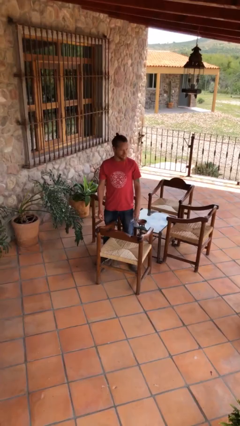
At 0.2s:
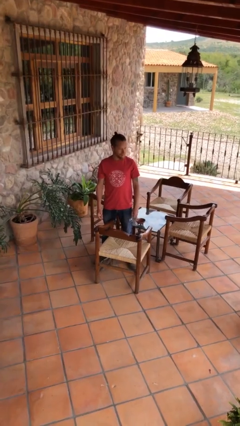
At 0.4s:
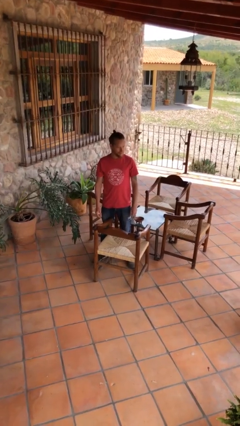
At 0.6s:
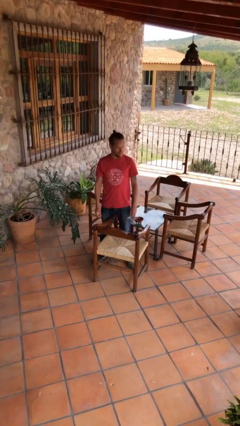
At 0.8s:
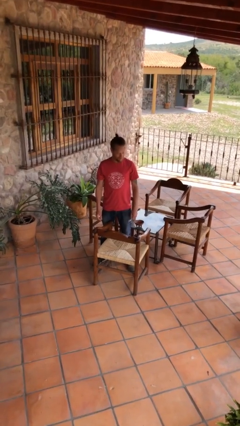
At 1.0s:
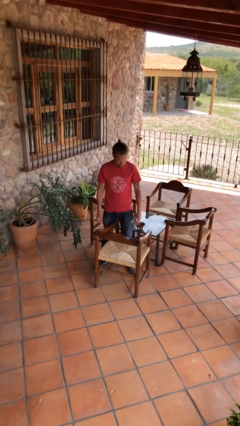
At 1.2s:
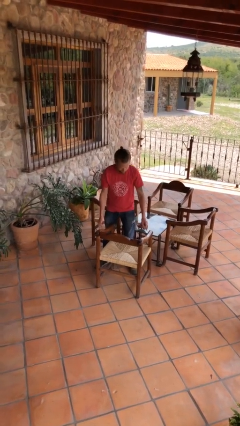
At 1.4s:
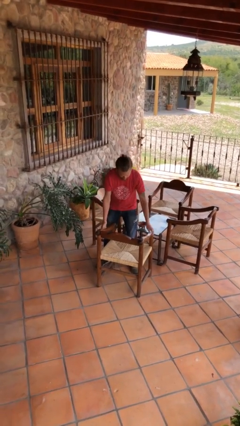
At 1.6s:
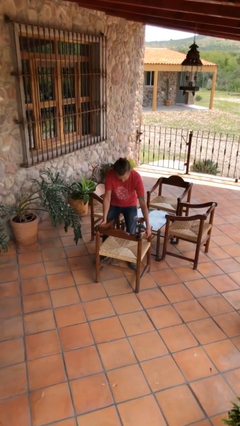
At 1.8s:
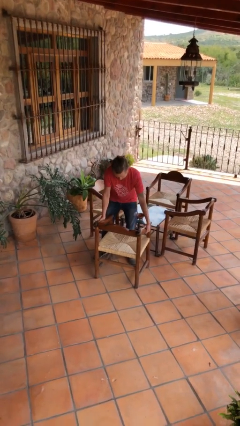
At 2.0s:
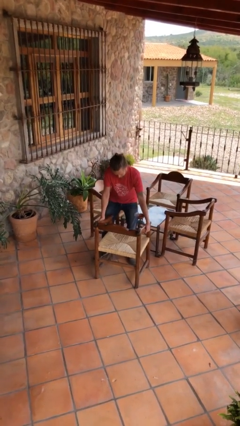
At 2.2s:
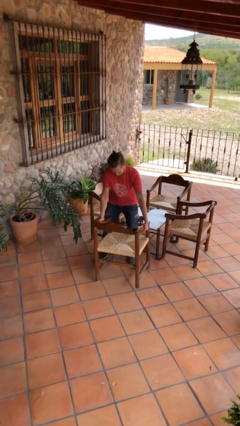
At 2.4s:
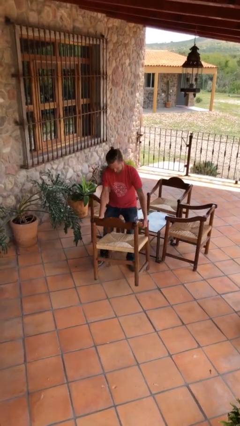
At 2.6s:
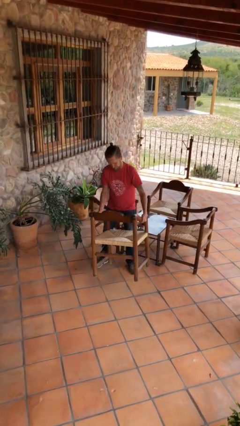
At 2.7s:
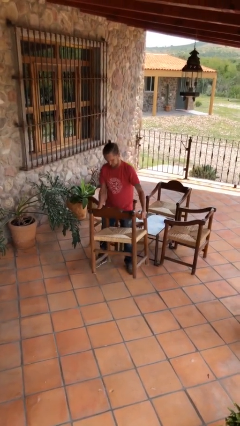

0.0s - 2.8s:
person picks up object from floor

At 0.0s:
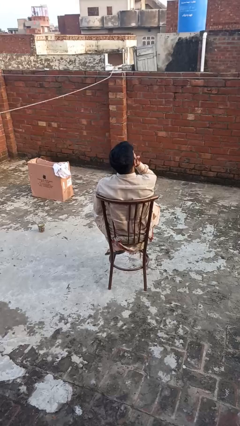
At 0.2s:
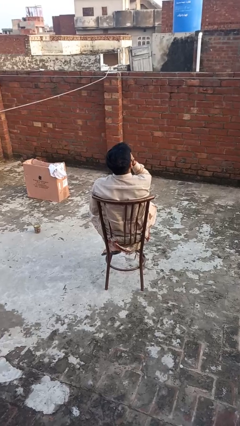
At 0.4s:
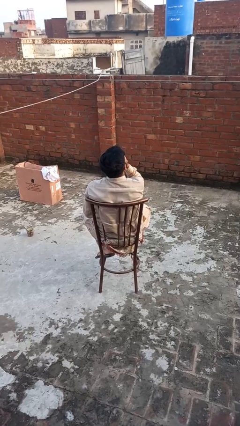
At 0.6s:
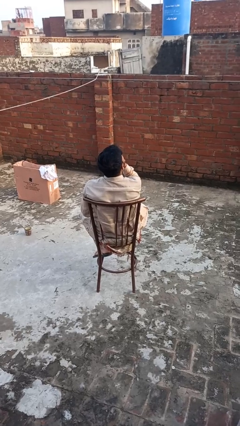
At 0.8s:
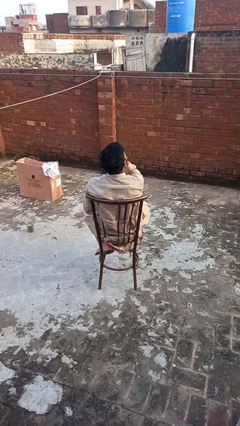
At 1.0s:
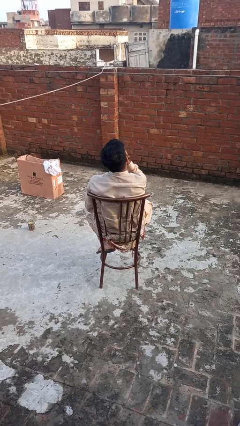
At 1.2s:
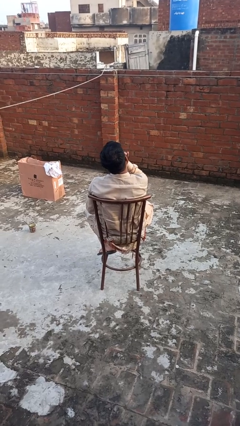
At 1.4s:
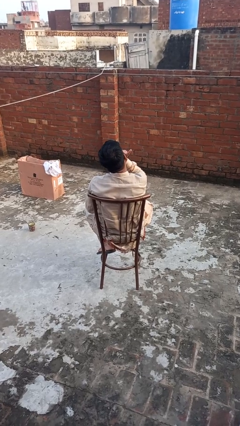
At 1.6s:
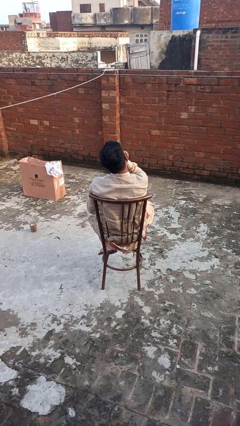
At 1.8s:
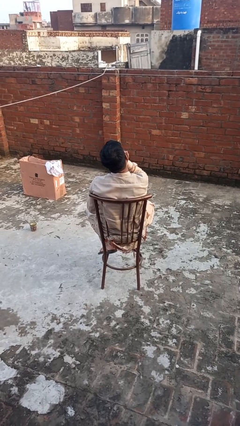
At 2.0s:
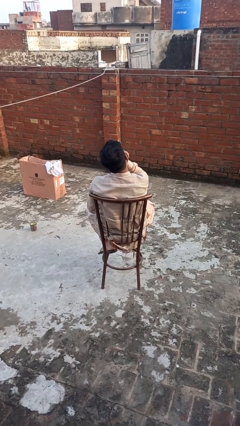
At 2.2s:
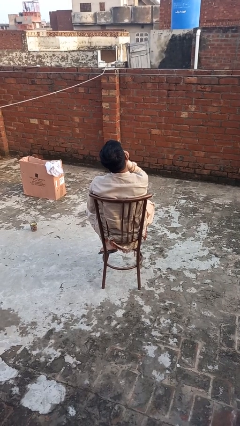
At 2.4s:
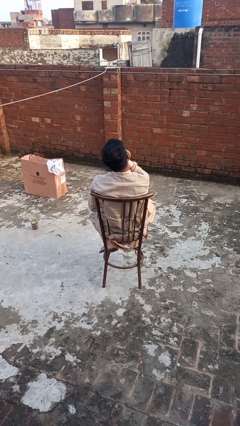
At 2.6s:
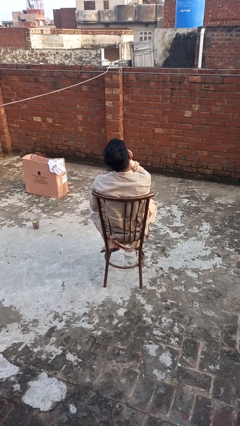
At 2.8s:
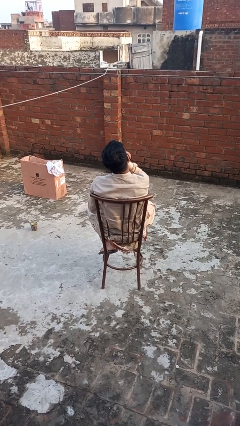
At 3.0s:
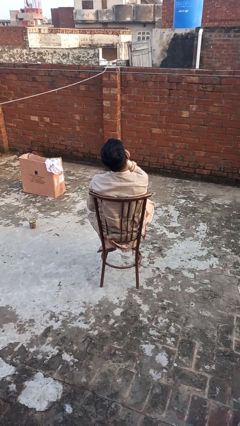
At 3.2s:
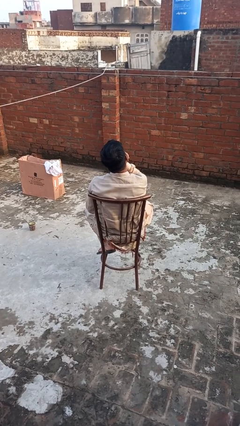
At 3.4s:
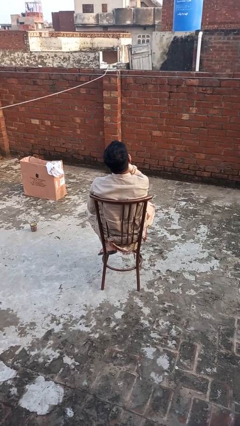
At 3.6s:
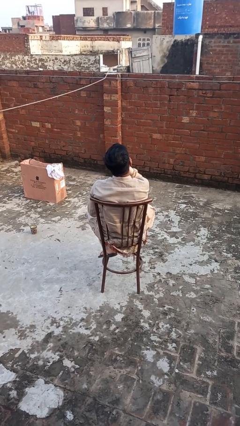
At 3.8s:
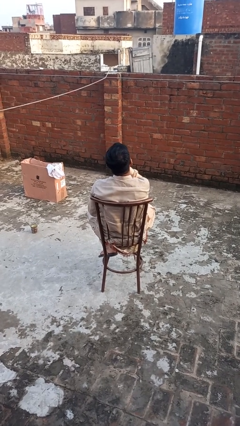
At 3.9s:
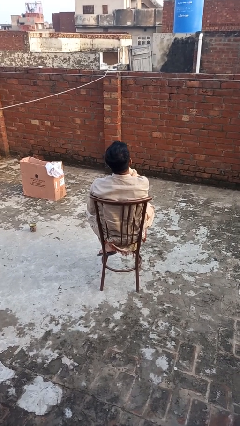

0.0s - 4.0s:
person strokes chin

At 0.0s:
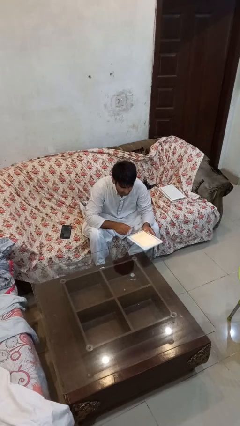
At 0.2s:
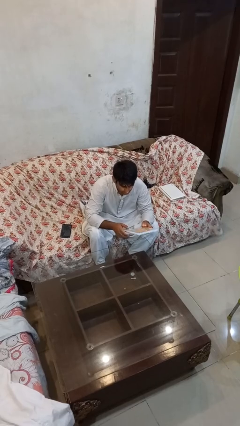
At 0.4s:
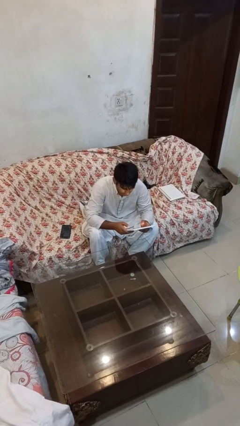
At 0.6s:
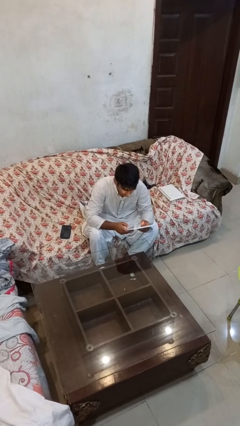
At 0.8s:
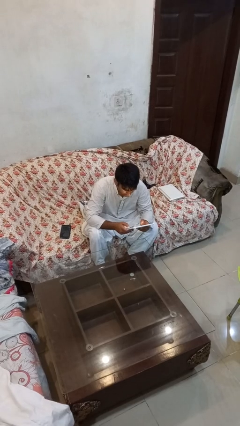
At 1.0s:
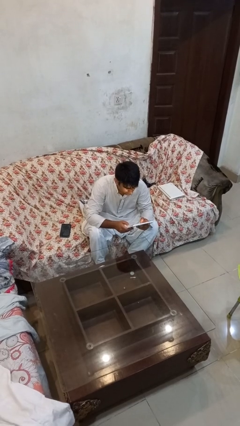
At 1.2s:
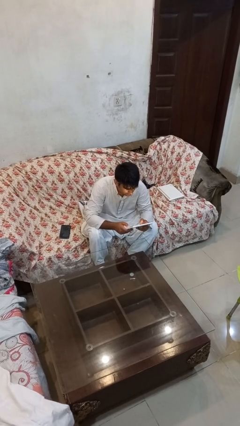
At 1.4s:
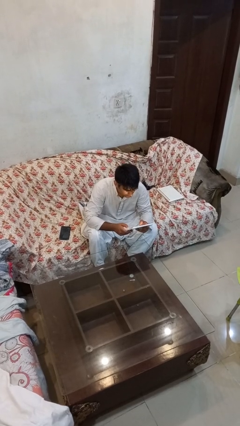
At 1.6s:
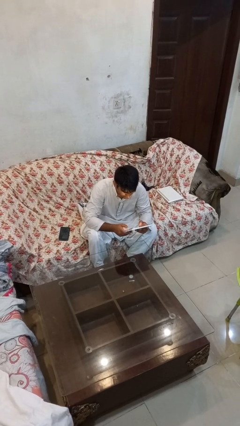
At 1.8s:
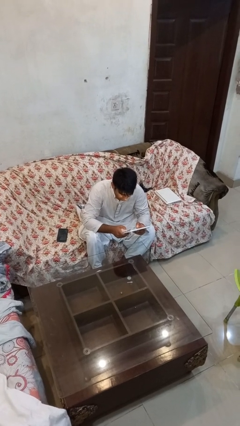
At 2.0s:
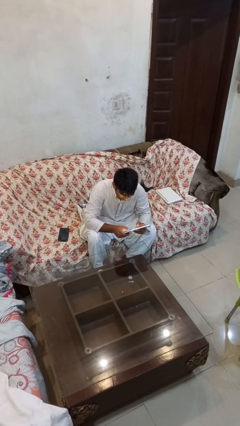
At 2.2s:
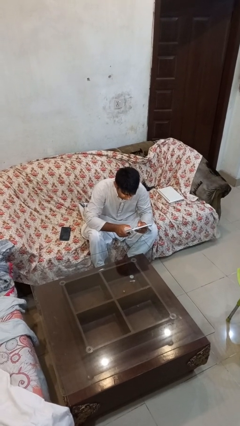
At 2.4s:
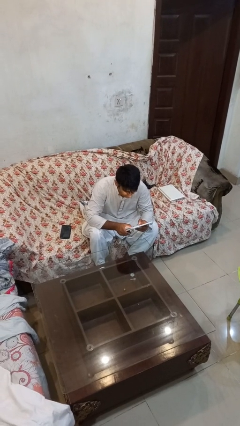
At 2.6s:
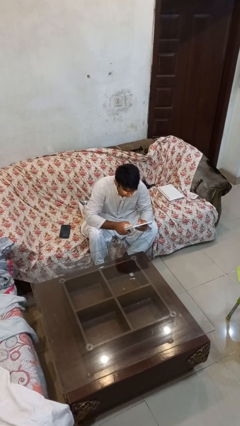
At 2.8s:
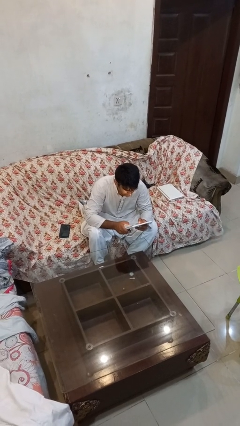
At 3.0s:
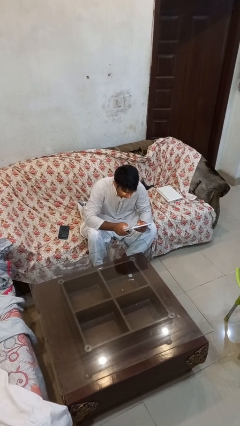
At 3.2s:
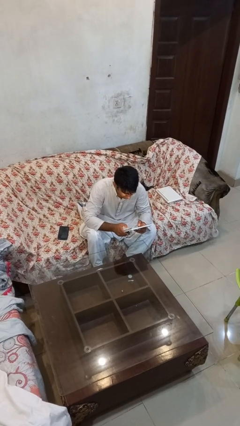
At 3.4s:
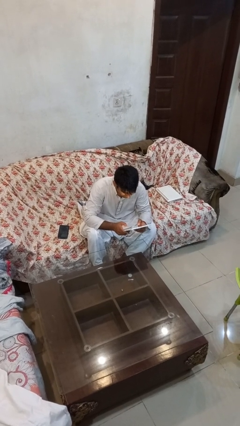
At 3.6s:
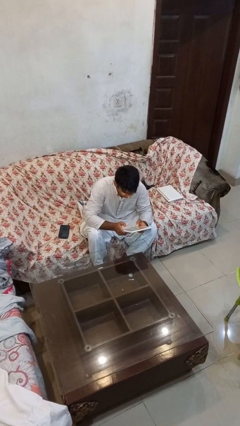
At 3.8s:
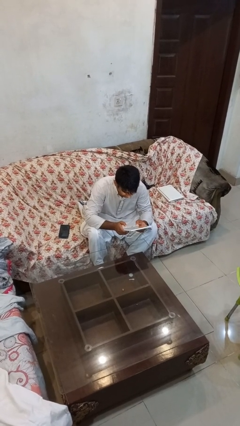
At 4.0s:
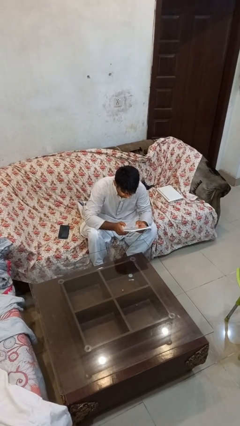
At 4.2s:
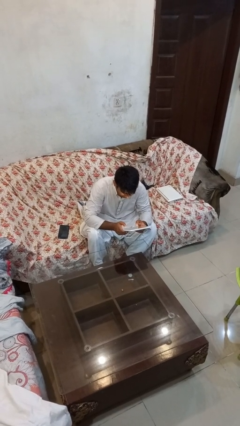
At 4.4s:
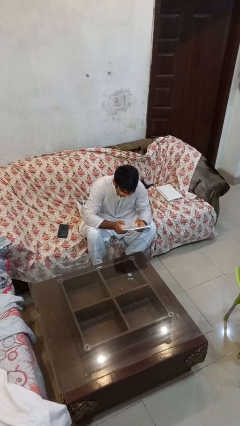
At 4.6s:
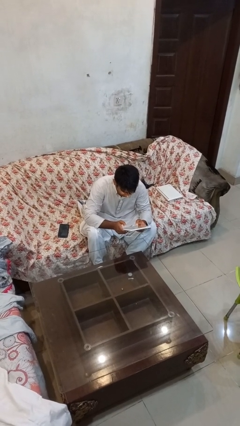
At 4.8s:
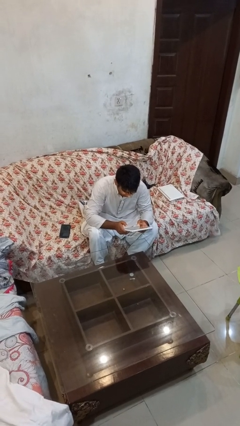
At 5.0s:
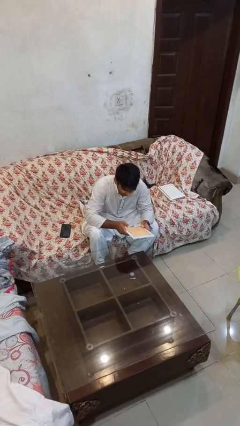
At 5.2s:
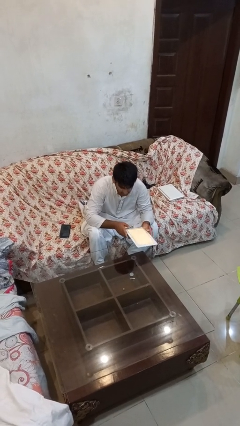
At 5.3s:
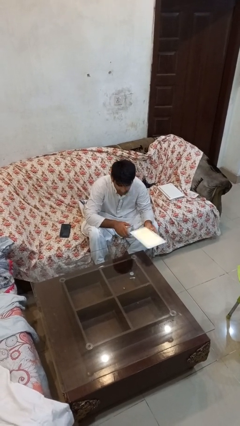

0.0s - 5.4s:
person interacts with tablet

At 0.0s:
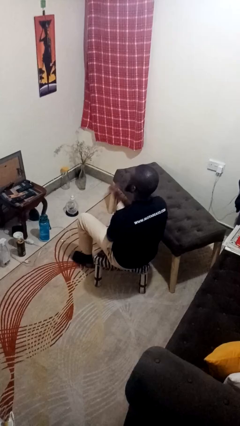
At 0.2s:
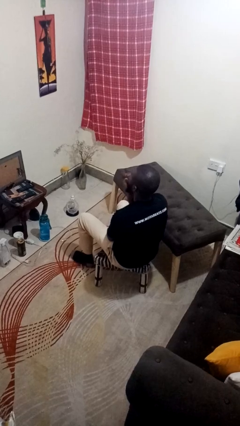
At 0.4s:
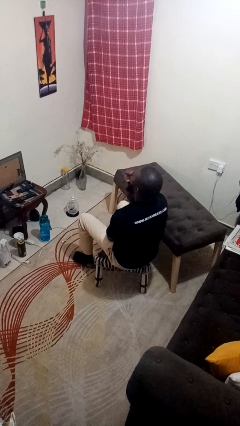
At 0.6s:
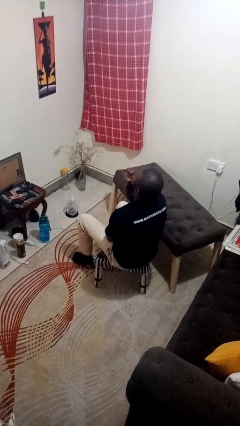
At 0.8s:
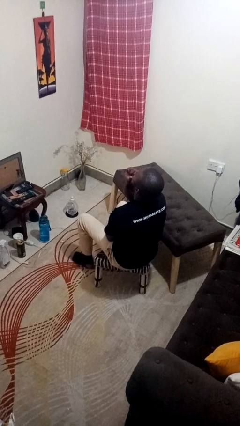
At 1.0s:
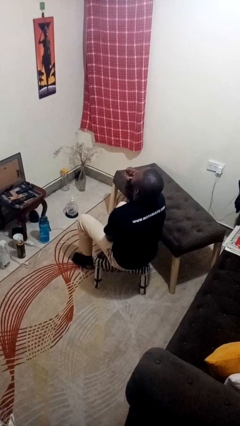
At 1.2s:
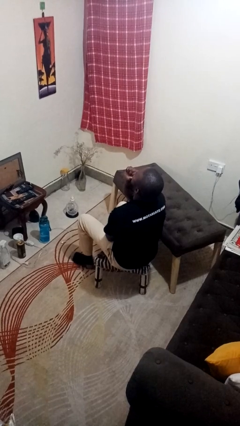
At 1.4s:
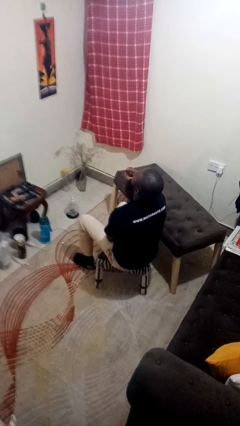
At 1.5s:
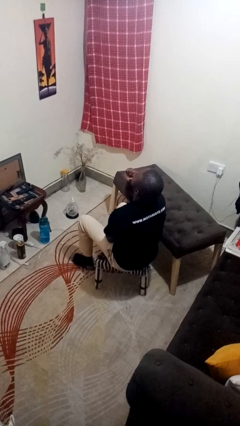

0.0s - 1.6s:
person yawns

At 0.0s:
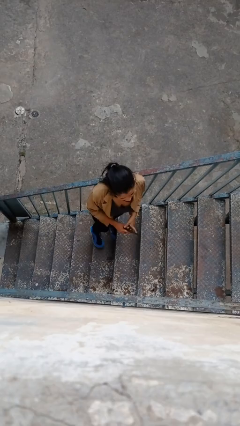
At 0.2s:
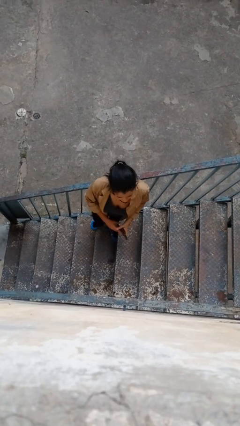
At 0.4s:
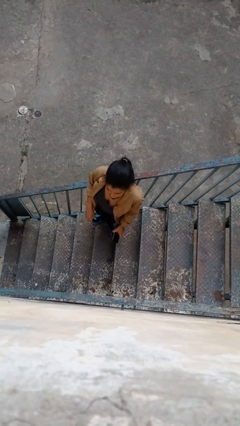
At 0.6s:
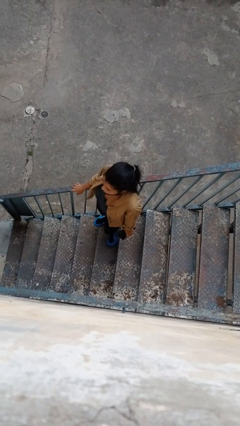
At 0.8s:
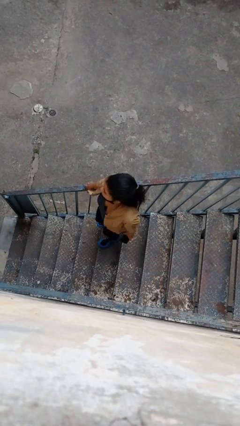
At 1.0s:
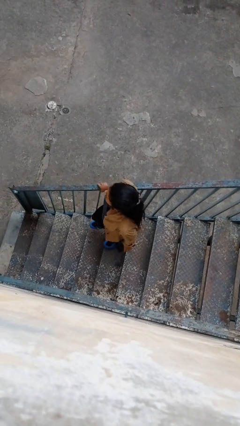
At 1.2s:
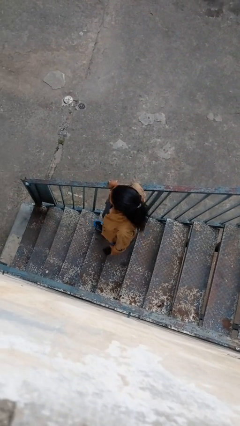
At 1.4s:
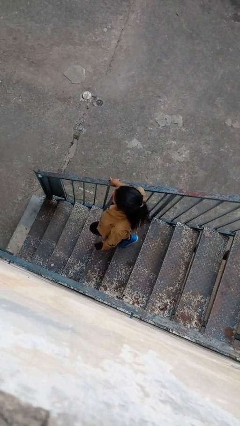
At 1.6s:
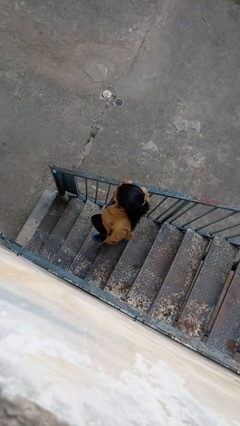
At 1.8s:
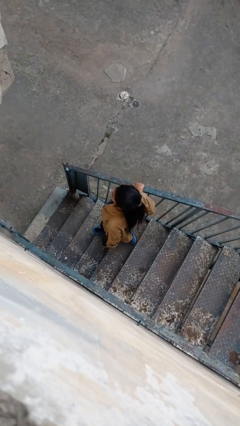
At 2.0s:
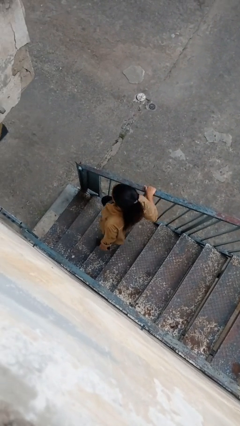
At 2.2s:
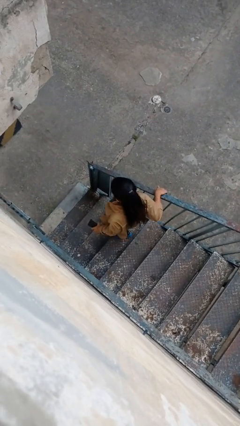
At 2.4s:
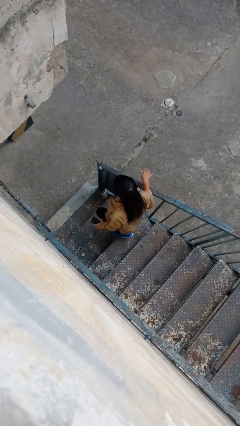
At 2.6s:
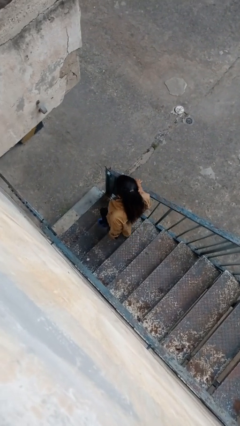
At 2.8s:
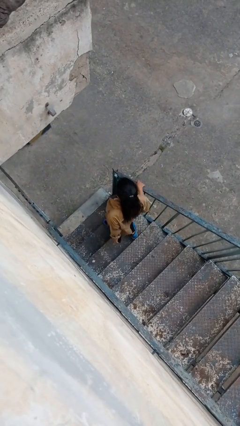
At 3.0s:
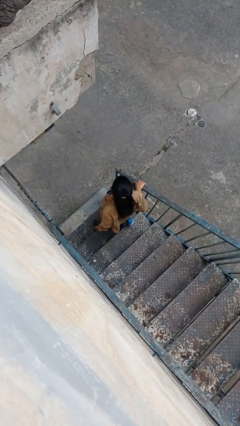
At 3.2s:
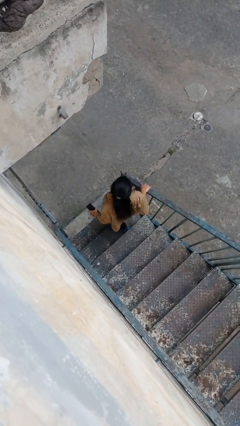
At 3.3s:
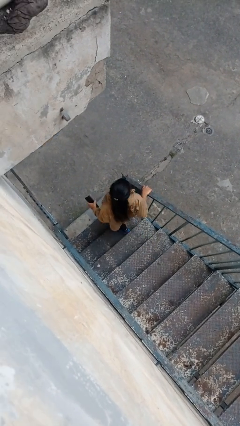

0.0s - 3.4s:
person climbs down stairs

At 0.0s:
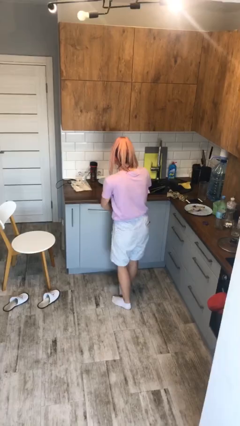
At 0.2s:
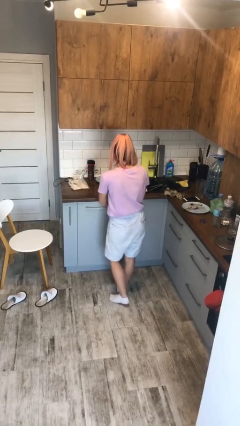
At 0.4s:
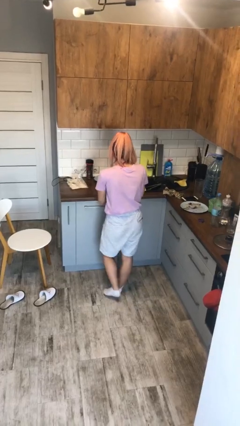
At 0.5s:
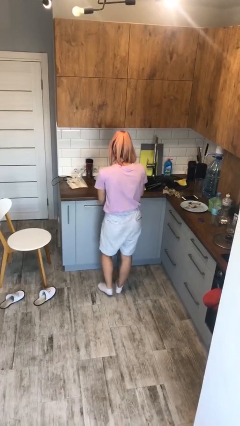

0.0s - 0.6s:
person closes cabinet
